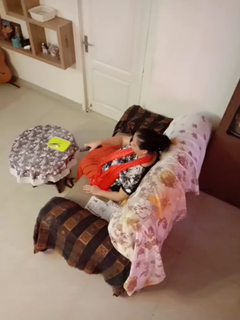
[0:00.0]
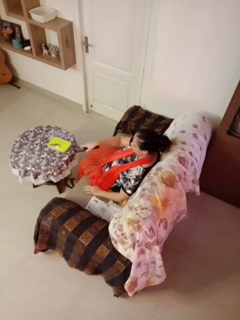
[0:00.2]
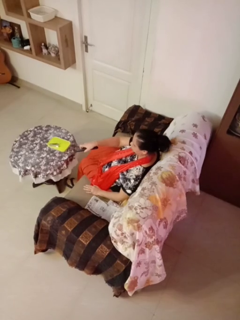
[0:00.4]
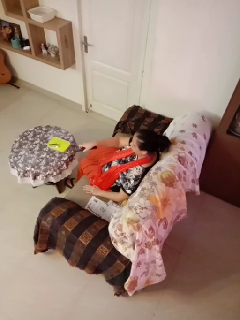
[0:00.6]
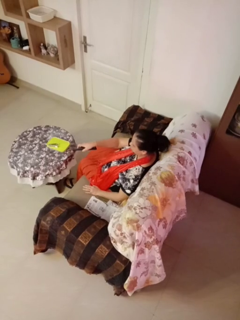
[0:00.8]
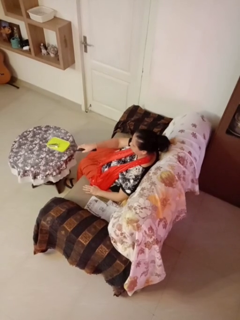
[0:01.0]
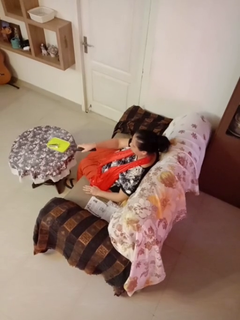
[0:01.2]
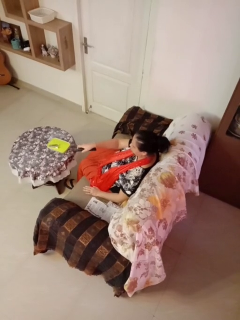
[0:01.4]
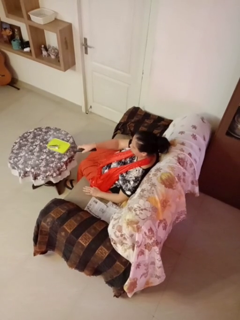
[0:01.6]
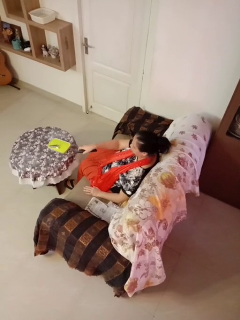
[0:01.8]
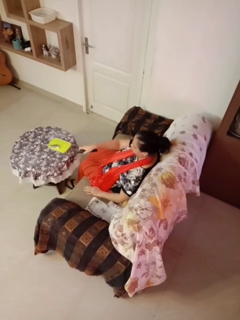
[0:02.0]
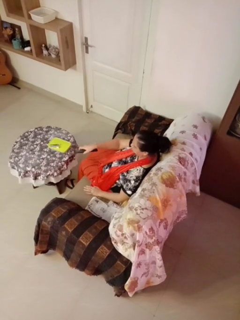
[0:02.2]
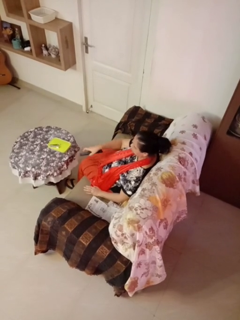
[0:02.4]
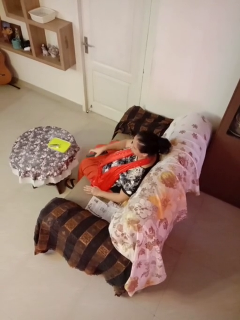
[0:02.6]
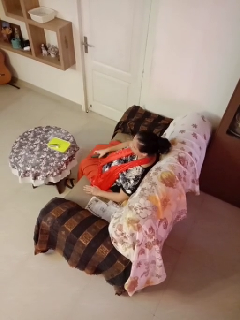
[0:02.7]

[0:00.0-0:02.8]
person uses television remote

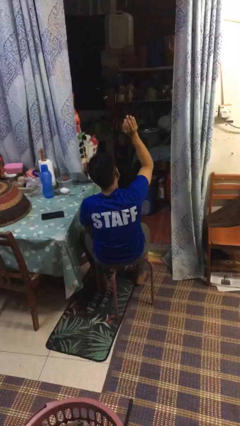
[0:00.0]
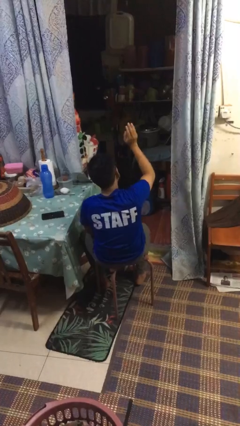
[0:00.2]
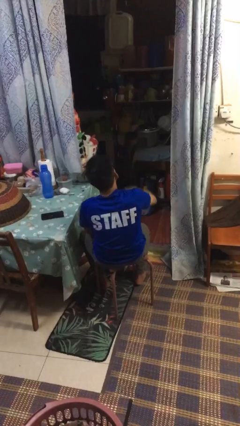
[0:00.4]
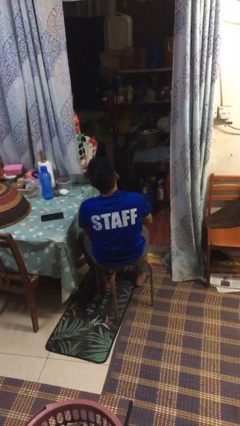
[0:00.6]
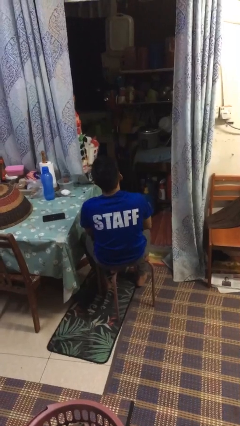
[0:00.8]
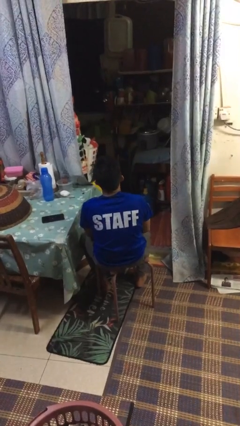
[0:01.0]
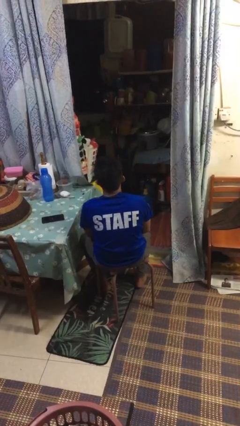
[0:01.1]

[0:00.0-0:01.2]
person gestures swipe down

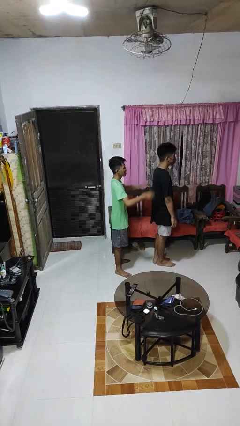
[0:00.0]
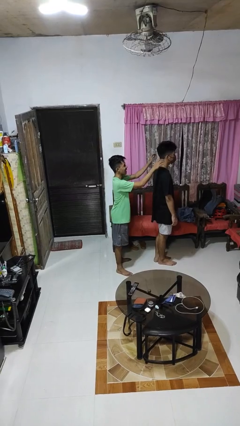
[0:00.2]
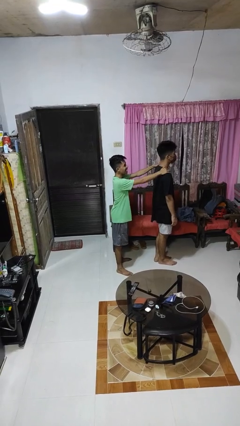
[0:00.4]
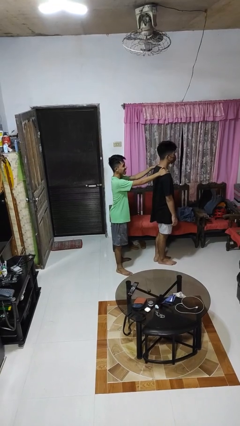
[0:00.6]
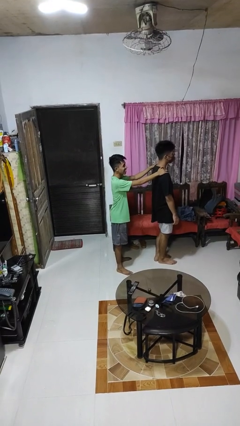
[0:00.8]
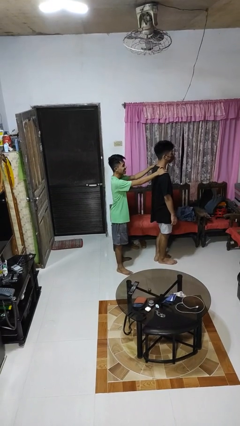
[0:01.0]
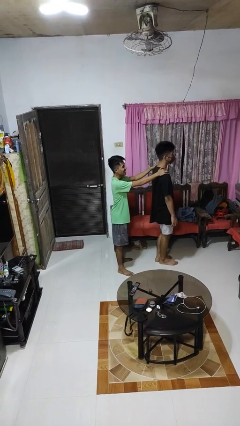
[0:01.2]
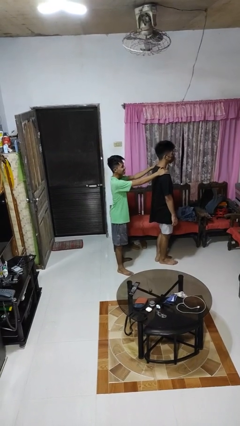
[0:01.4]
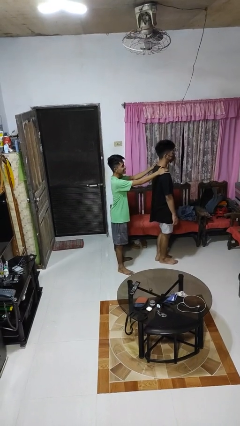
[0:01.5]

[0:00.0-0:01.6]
person grabs person by shoulder

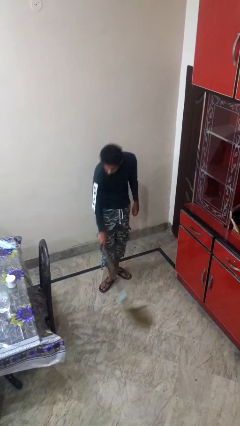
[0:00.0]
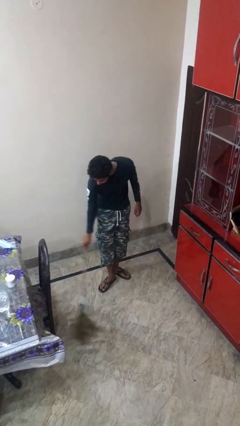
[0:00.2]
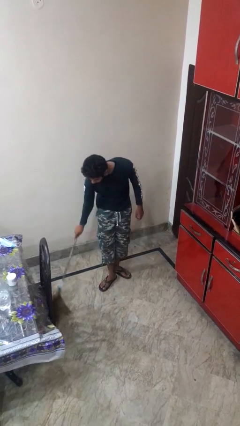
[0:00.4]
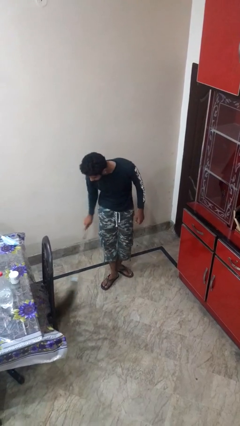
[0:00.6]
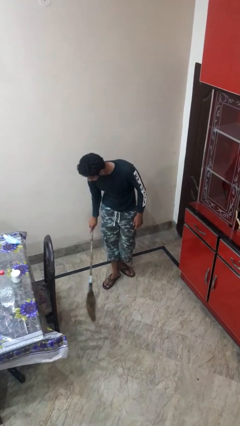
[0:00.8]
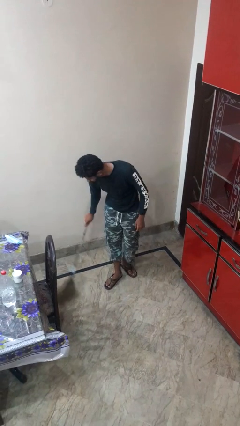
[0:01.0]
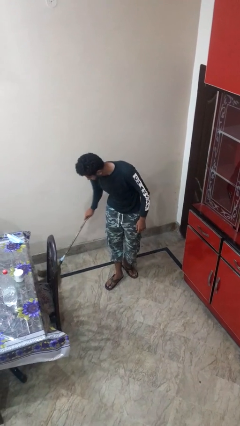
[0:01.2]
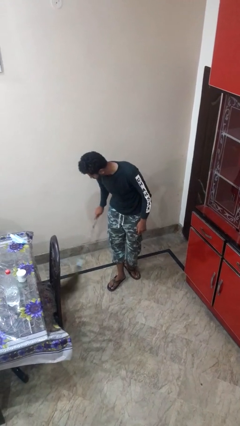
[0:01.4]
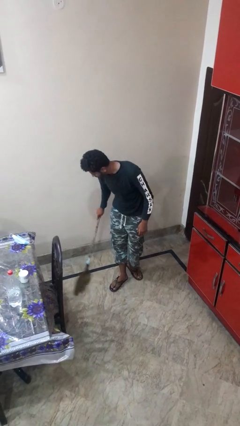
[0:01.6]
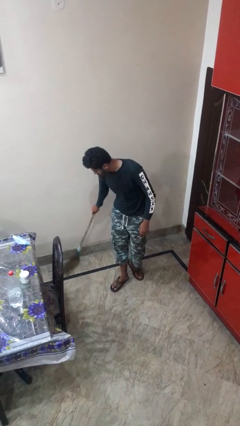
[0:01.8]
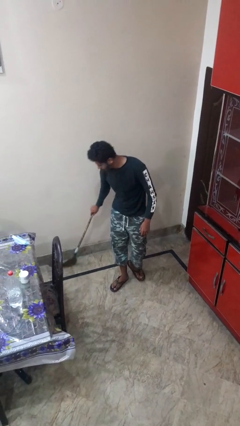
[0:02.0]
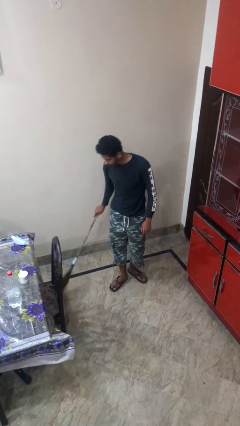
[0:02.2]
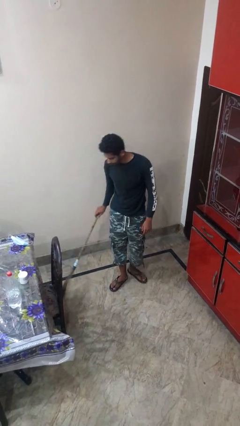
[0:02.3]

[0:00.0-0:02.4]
person sweeps floor

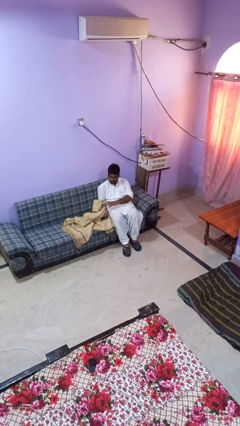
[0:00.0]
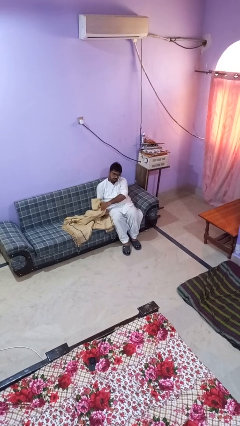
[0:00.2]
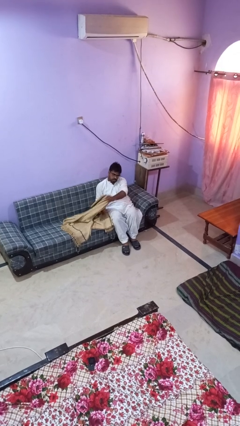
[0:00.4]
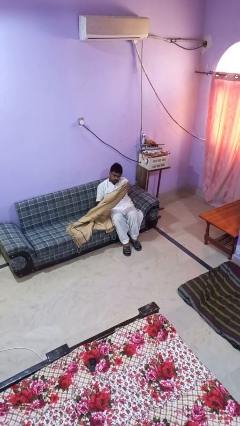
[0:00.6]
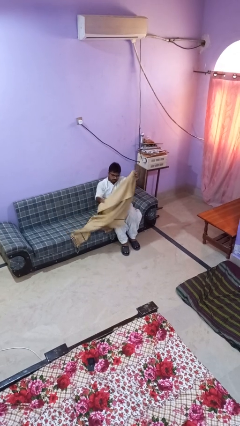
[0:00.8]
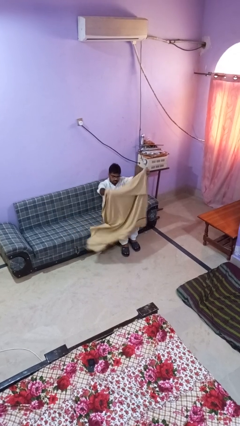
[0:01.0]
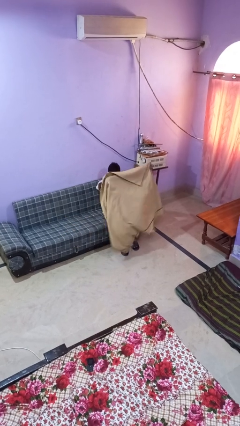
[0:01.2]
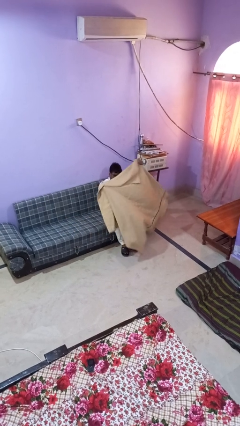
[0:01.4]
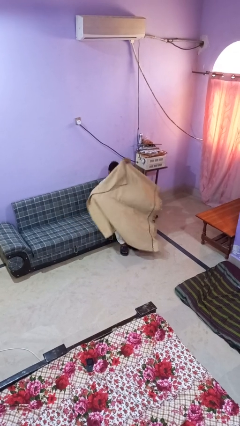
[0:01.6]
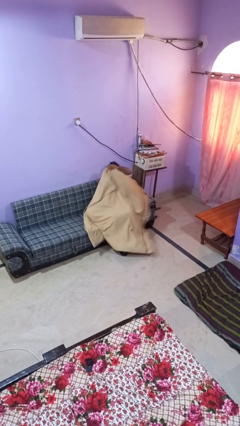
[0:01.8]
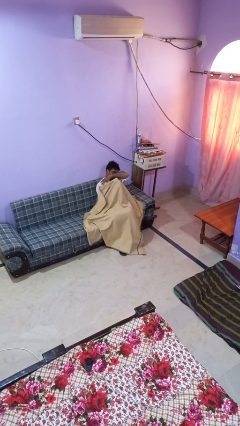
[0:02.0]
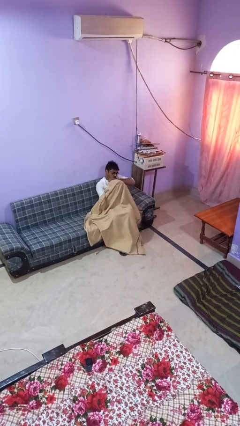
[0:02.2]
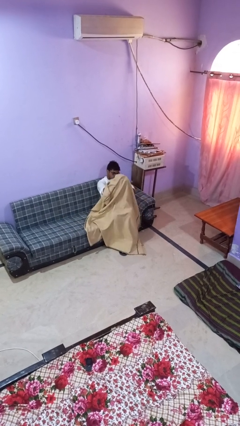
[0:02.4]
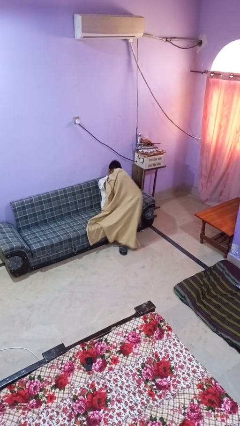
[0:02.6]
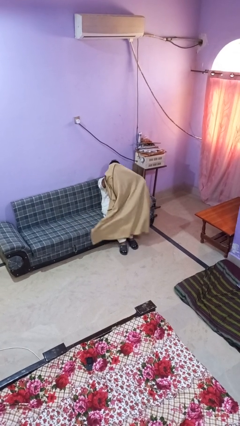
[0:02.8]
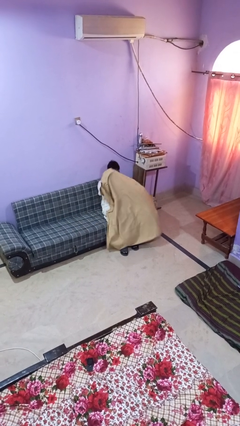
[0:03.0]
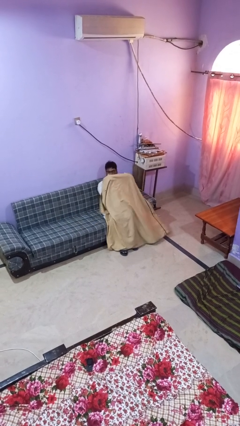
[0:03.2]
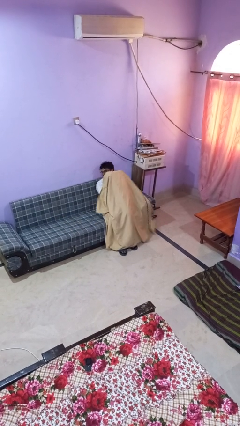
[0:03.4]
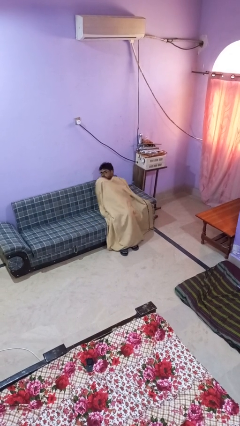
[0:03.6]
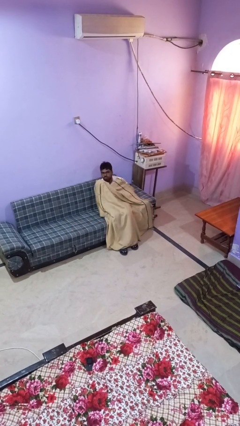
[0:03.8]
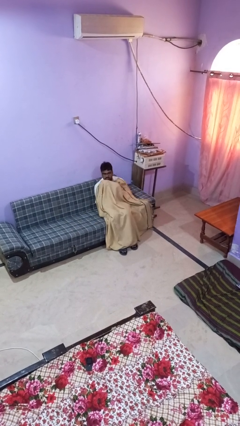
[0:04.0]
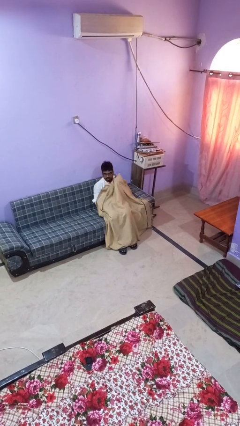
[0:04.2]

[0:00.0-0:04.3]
person covers with blanket

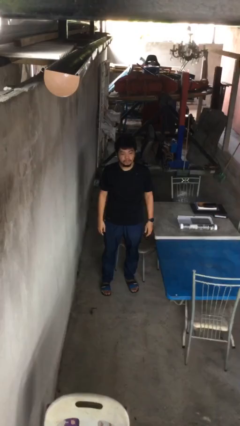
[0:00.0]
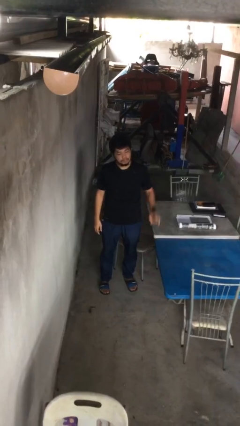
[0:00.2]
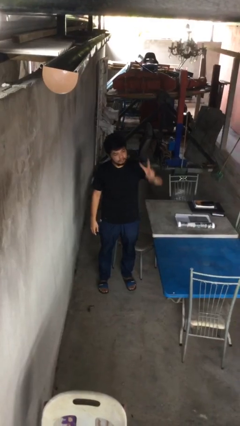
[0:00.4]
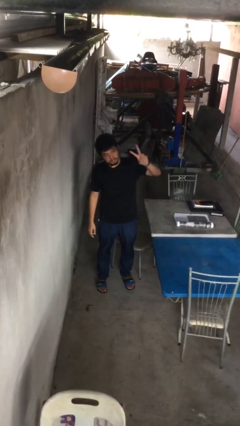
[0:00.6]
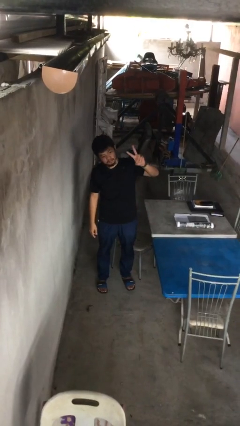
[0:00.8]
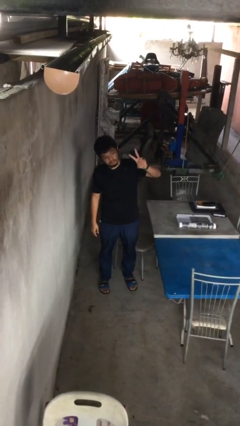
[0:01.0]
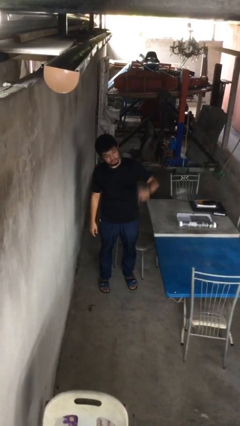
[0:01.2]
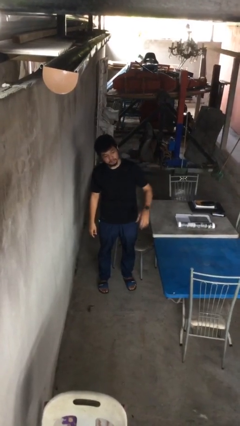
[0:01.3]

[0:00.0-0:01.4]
person gestures peace

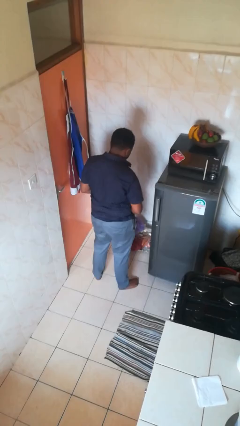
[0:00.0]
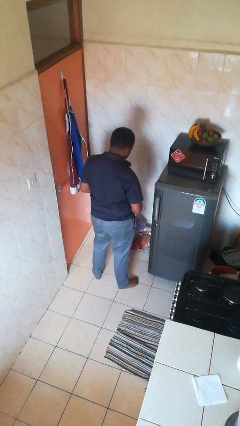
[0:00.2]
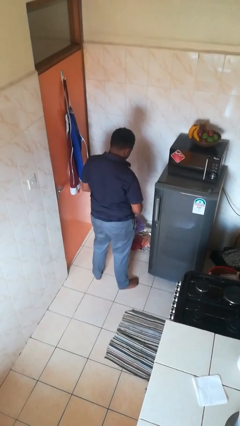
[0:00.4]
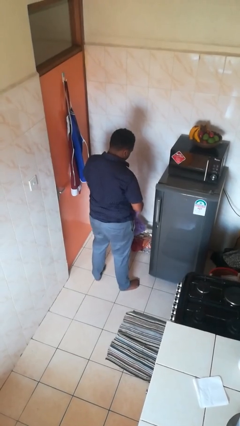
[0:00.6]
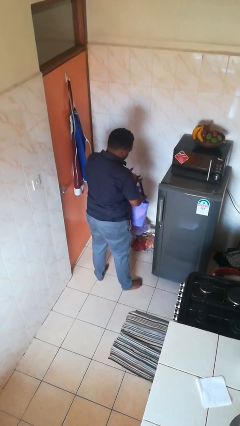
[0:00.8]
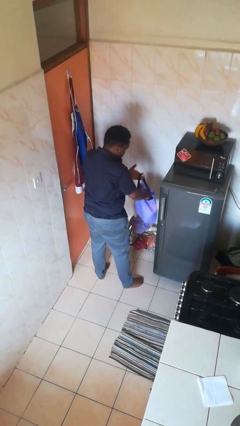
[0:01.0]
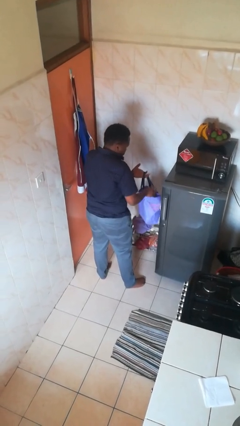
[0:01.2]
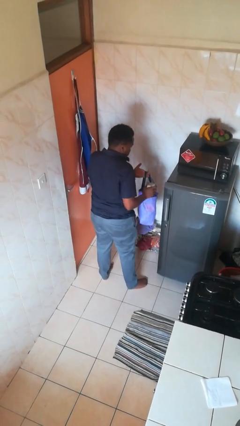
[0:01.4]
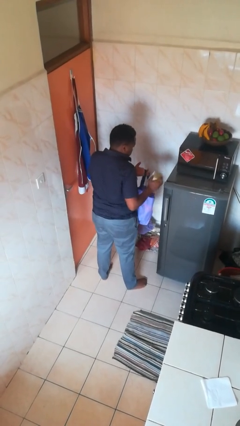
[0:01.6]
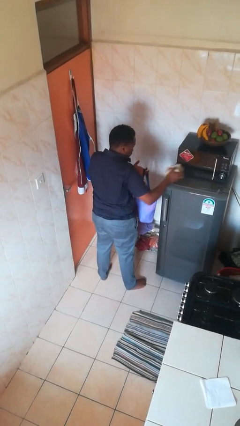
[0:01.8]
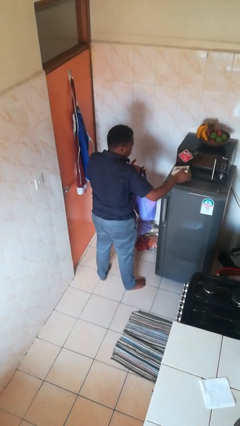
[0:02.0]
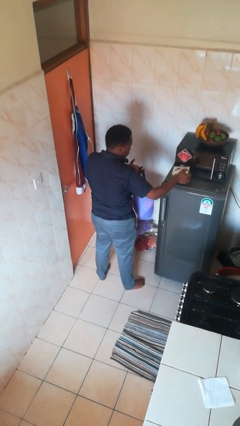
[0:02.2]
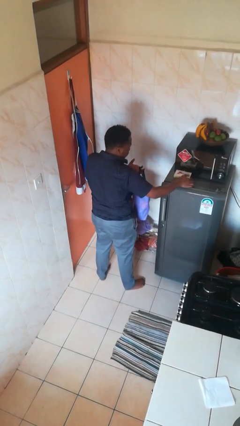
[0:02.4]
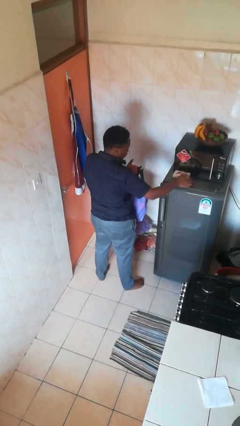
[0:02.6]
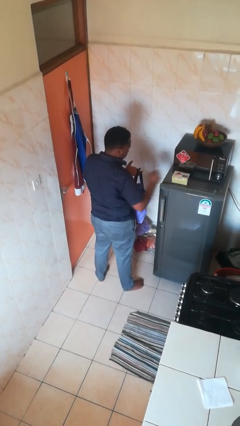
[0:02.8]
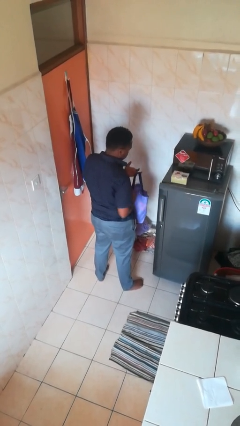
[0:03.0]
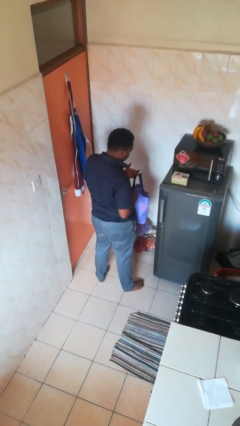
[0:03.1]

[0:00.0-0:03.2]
person takes object from bag

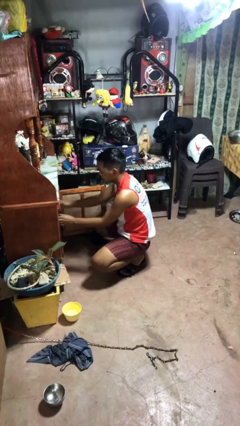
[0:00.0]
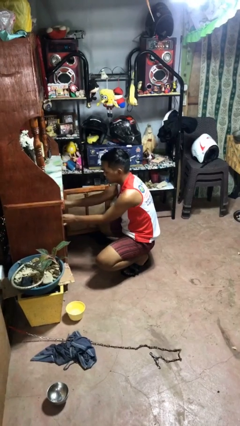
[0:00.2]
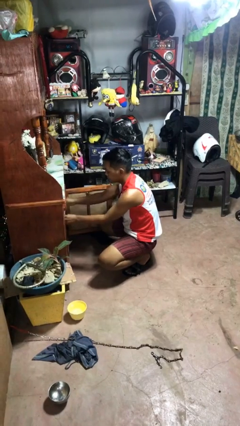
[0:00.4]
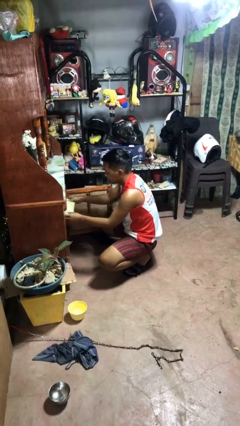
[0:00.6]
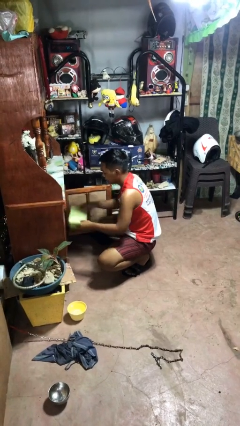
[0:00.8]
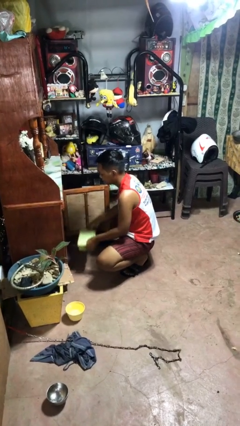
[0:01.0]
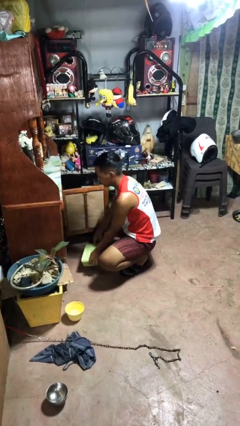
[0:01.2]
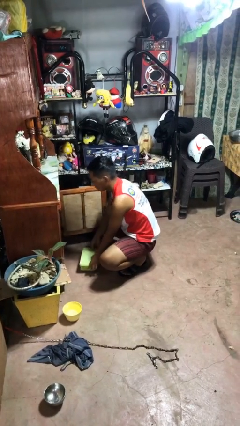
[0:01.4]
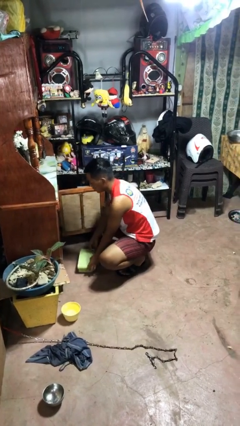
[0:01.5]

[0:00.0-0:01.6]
person takes object from cabinet
